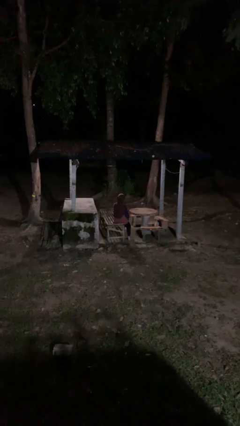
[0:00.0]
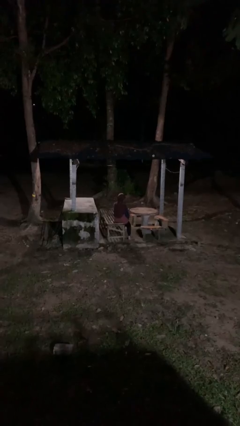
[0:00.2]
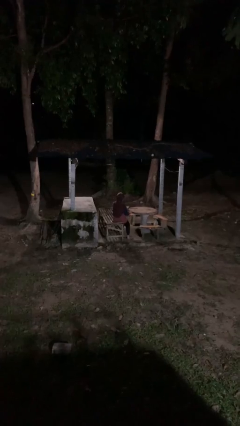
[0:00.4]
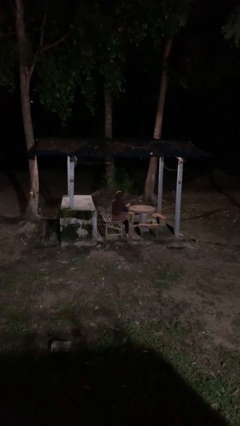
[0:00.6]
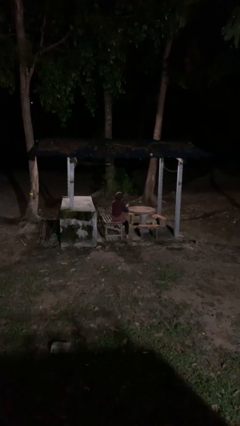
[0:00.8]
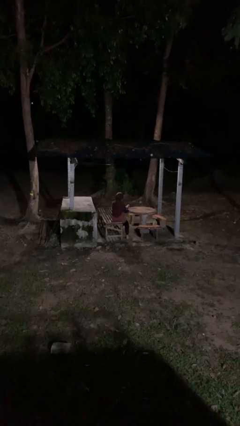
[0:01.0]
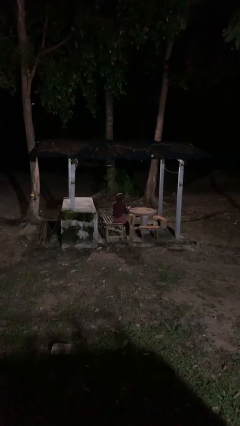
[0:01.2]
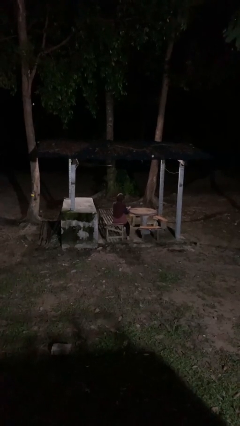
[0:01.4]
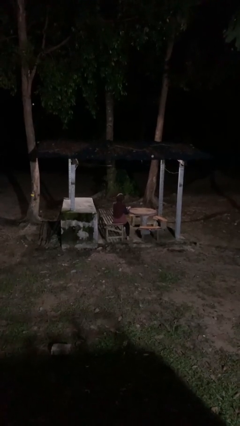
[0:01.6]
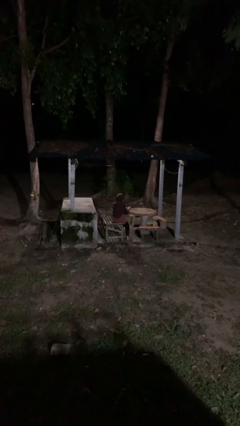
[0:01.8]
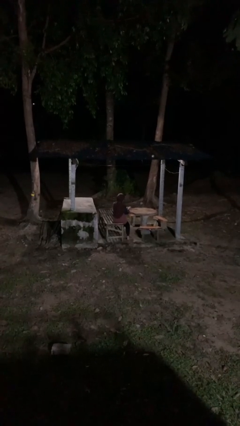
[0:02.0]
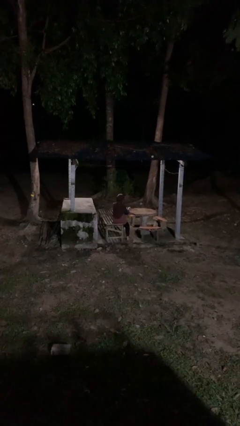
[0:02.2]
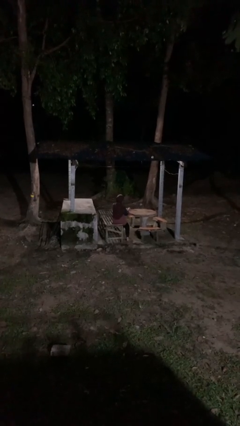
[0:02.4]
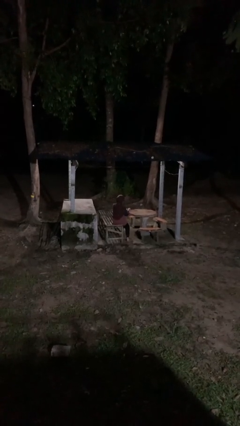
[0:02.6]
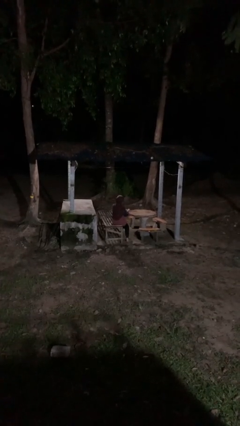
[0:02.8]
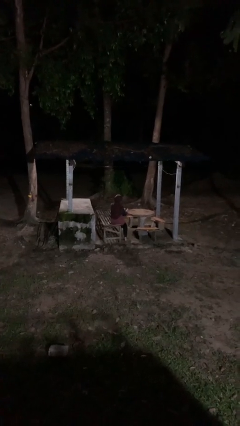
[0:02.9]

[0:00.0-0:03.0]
person paints fingernails

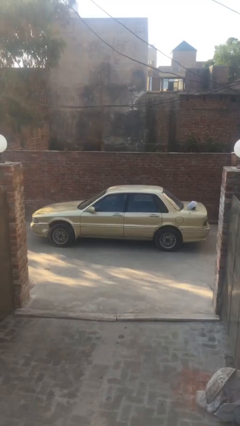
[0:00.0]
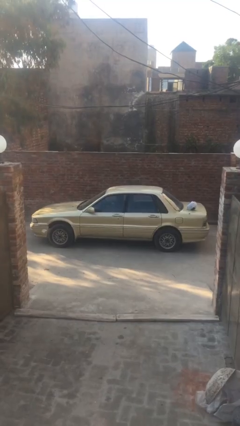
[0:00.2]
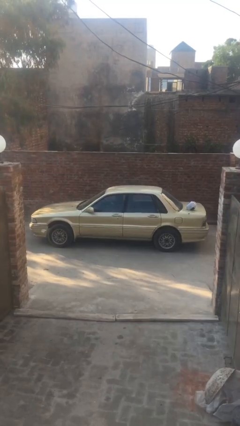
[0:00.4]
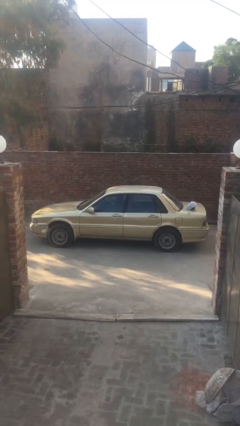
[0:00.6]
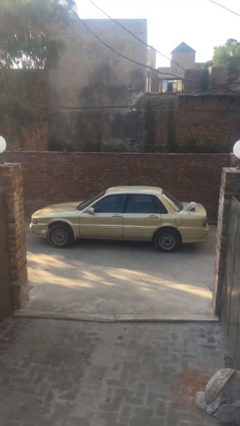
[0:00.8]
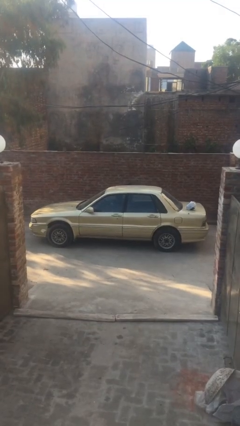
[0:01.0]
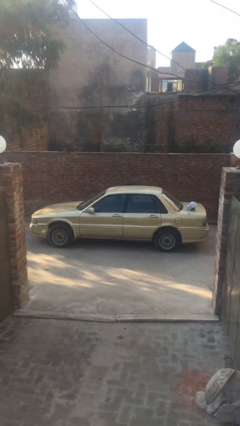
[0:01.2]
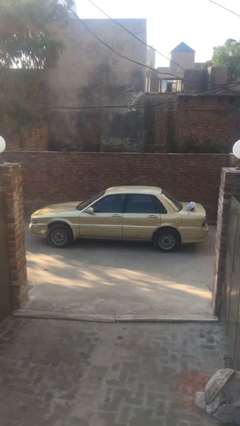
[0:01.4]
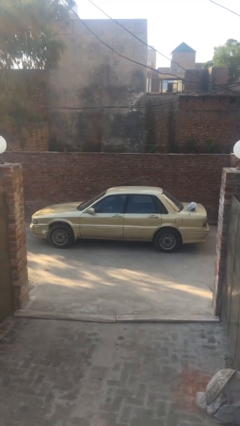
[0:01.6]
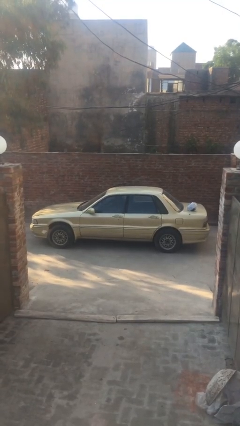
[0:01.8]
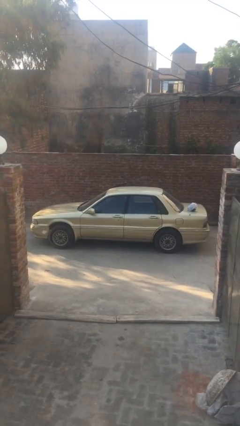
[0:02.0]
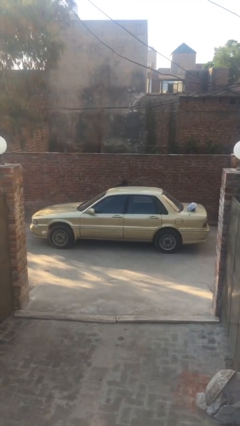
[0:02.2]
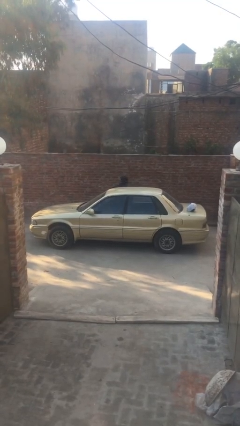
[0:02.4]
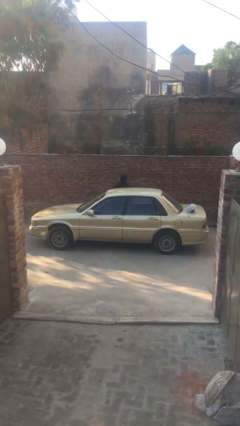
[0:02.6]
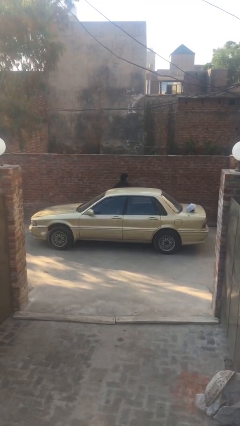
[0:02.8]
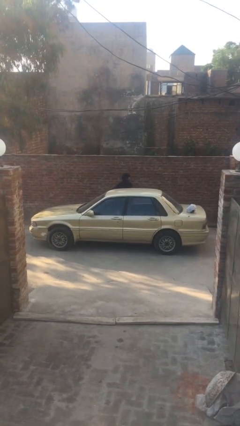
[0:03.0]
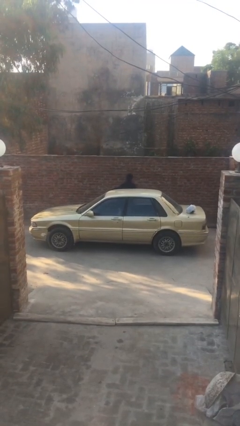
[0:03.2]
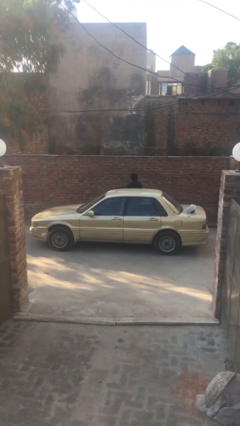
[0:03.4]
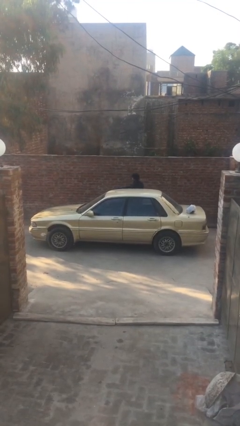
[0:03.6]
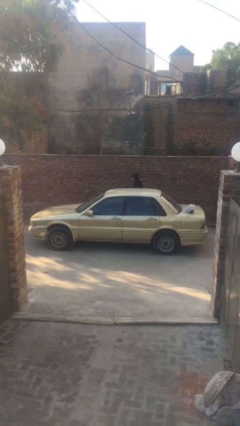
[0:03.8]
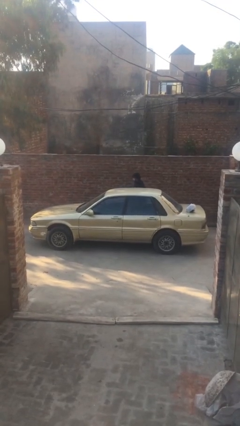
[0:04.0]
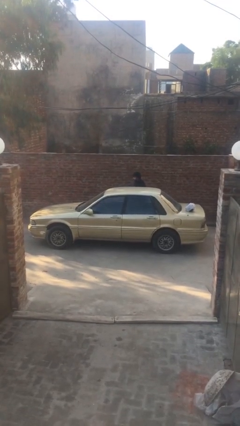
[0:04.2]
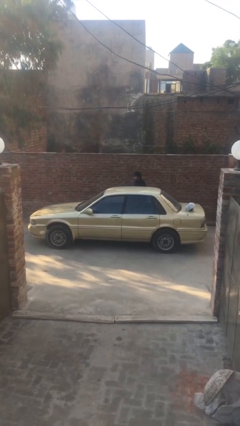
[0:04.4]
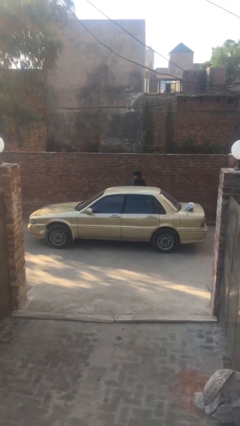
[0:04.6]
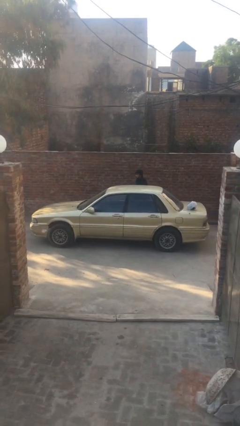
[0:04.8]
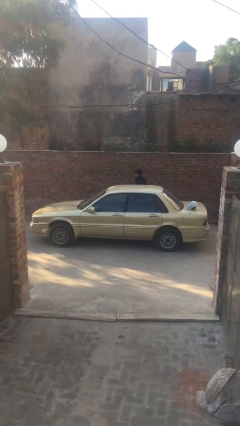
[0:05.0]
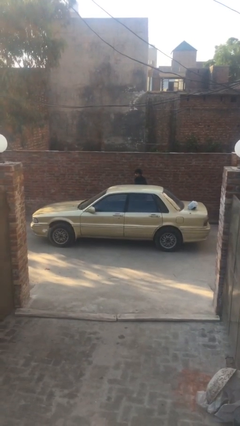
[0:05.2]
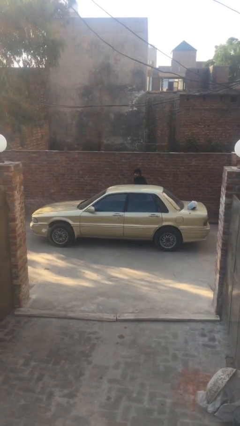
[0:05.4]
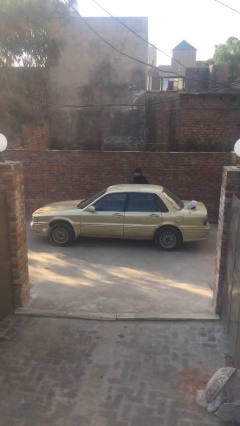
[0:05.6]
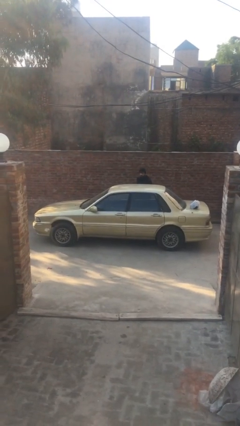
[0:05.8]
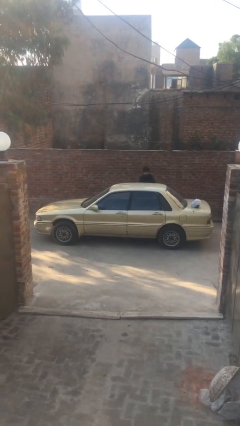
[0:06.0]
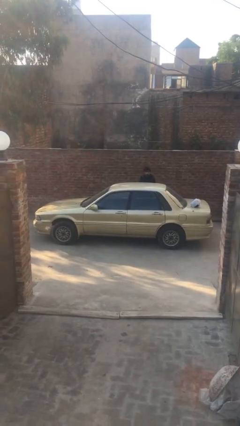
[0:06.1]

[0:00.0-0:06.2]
car drops off person

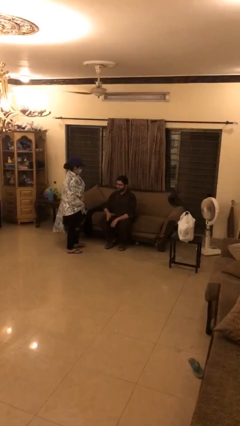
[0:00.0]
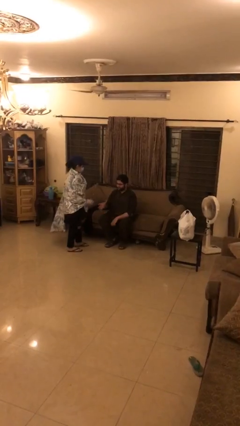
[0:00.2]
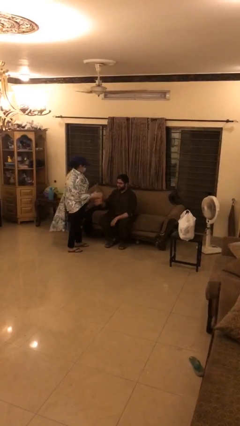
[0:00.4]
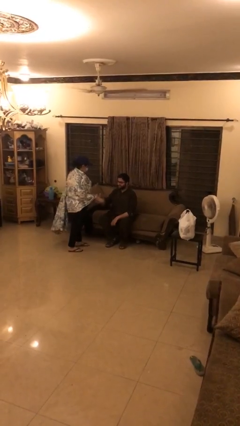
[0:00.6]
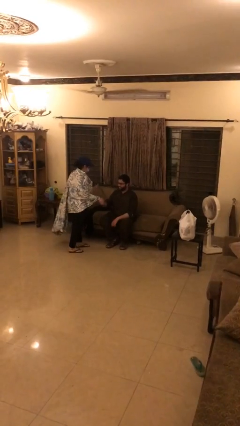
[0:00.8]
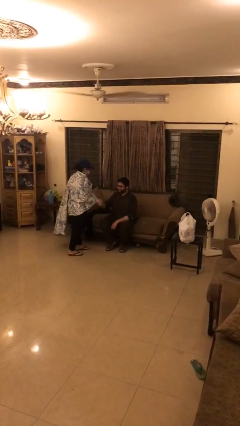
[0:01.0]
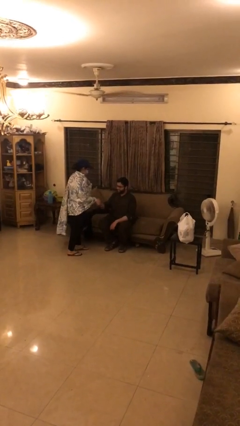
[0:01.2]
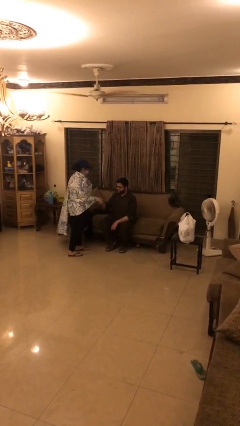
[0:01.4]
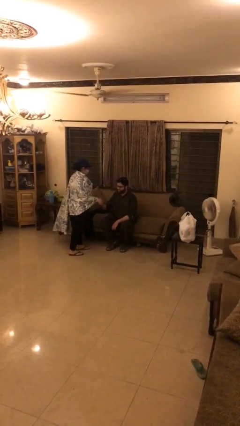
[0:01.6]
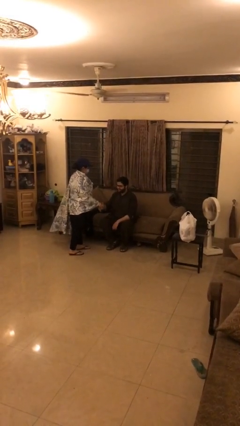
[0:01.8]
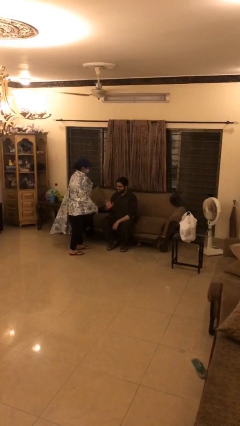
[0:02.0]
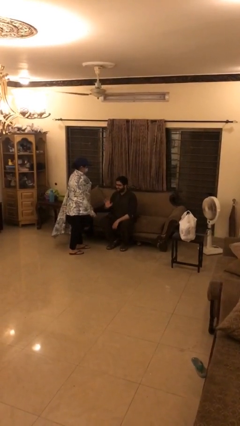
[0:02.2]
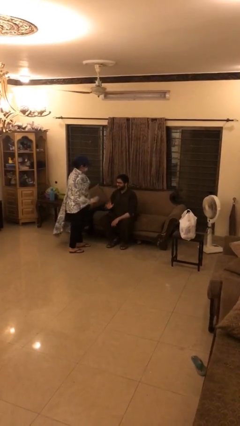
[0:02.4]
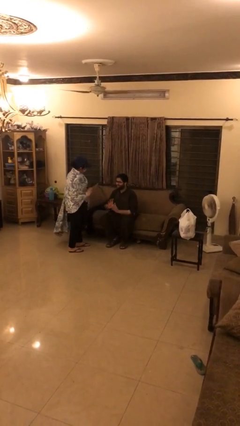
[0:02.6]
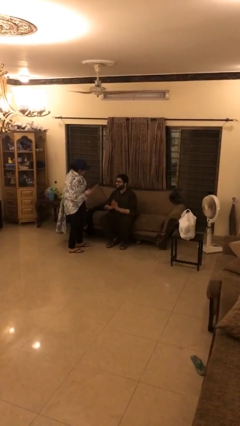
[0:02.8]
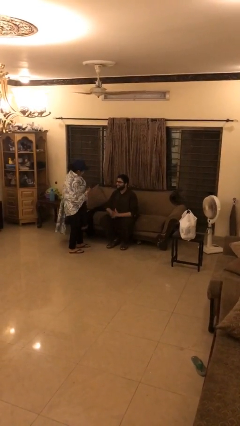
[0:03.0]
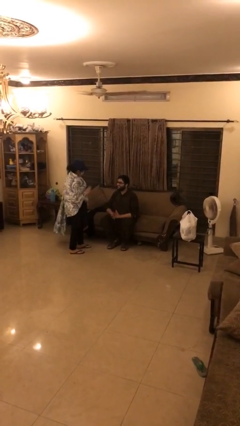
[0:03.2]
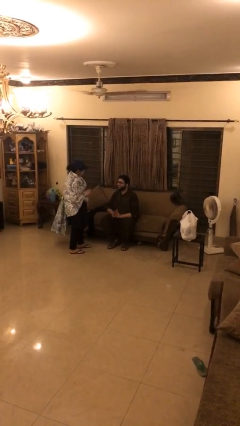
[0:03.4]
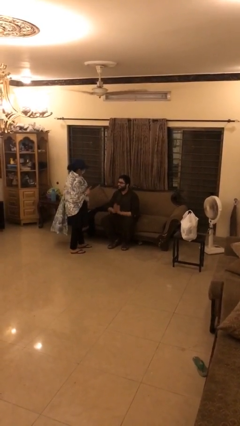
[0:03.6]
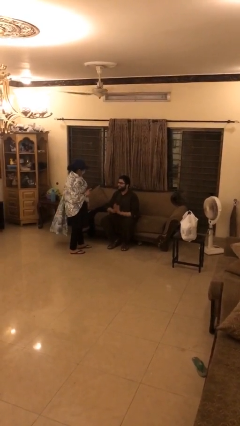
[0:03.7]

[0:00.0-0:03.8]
person shakes hand

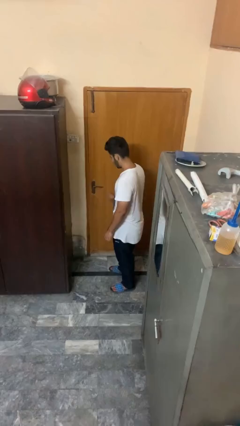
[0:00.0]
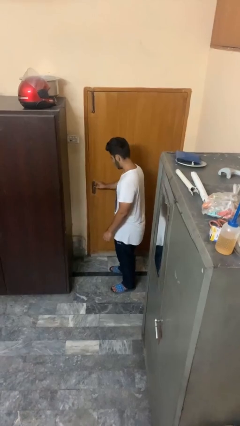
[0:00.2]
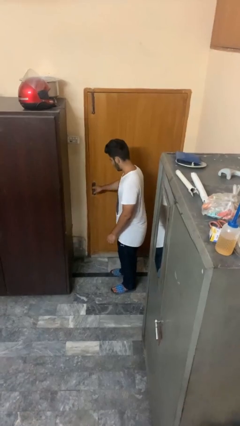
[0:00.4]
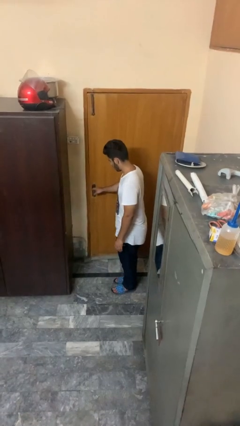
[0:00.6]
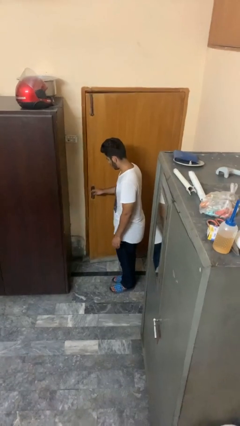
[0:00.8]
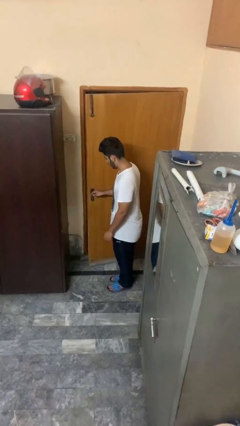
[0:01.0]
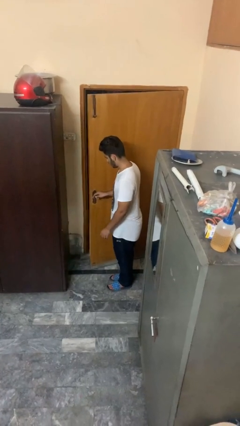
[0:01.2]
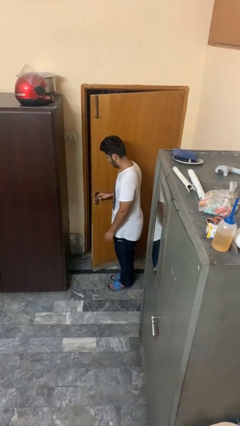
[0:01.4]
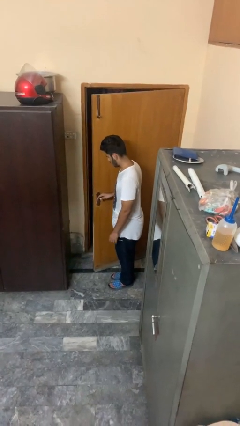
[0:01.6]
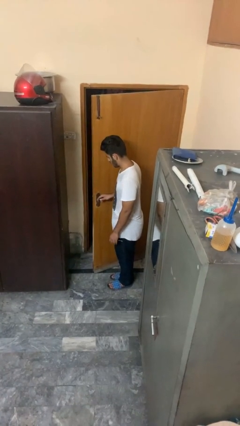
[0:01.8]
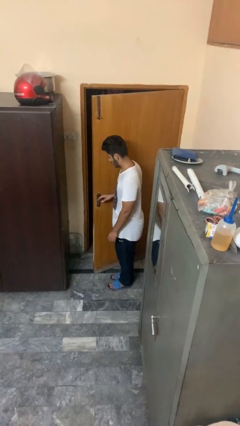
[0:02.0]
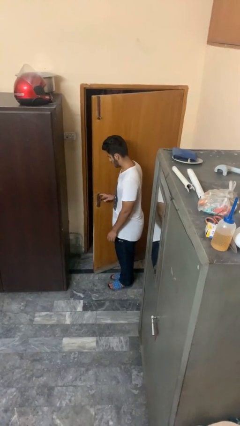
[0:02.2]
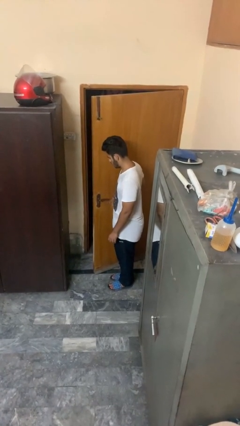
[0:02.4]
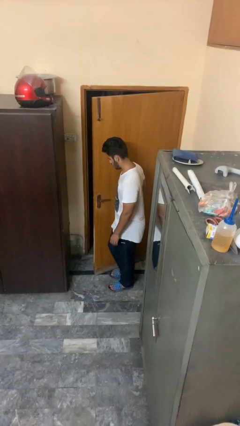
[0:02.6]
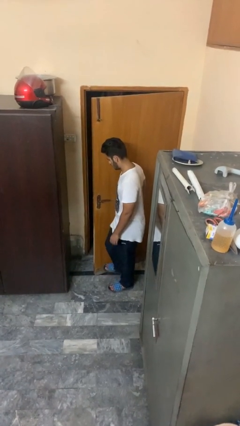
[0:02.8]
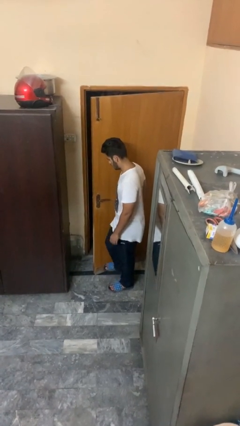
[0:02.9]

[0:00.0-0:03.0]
person opens facility door

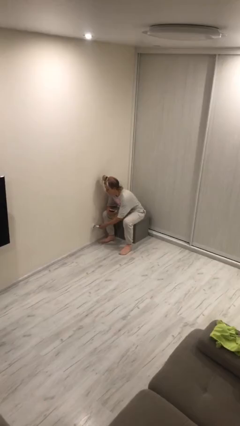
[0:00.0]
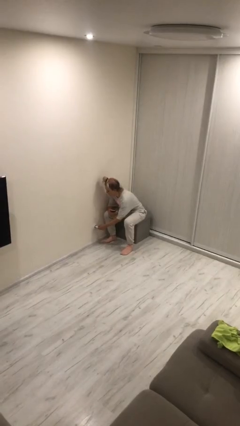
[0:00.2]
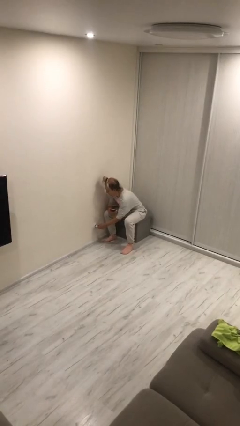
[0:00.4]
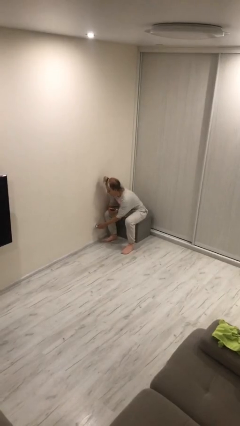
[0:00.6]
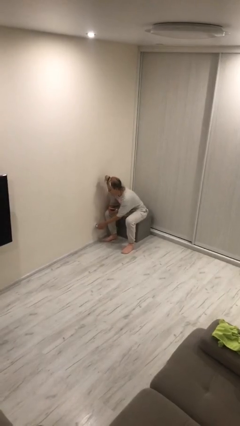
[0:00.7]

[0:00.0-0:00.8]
person plugs into electrical socket

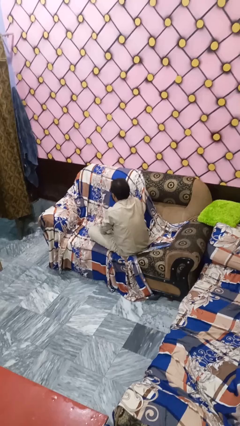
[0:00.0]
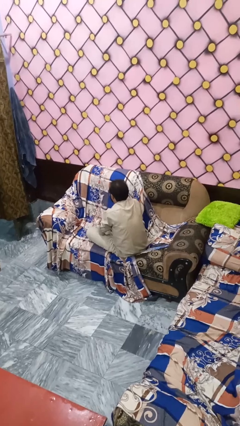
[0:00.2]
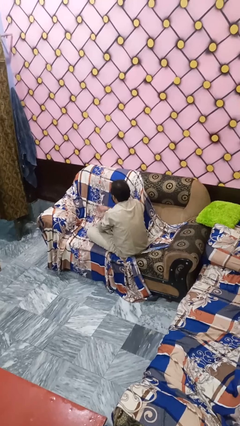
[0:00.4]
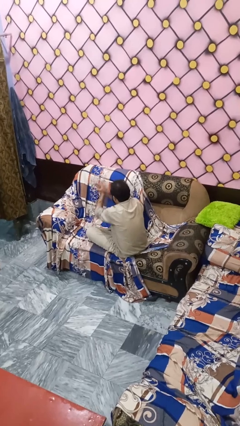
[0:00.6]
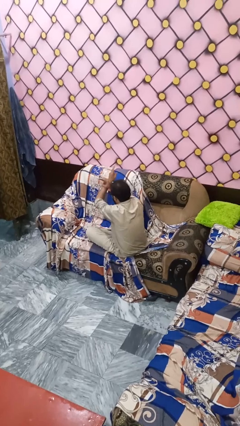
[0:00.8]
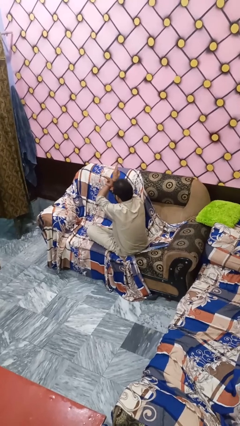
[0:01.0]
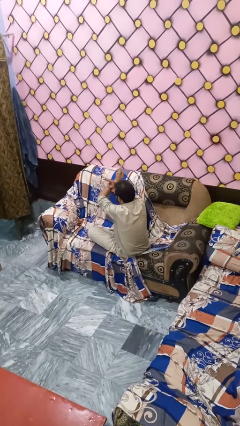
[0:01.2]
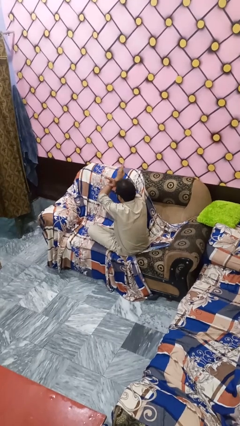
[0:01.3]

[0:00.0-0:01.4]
person gestures cut
